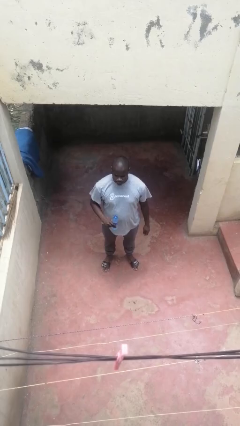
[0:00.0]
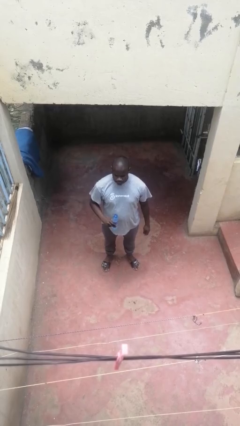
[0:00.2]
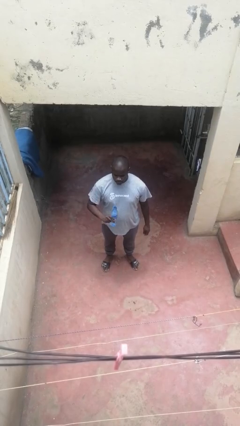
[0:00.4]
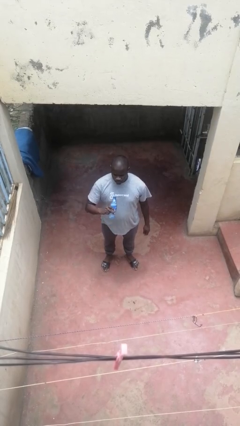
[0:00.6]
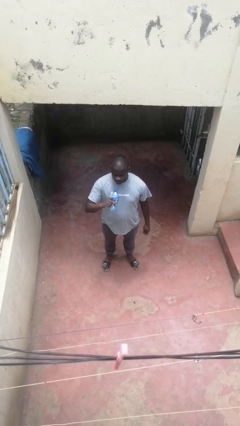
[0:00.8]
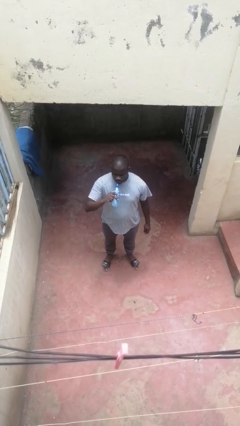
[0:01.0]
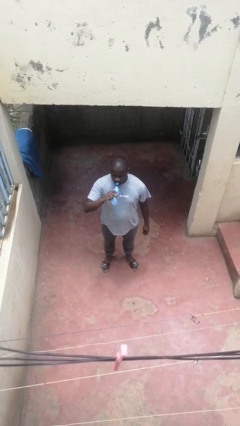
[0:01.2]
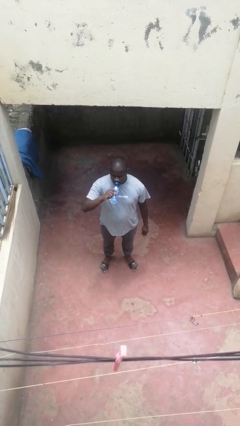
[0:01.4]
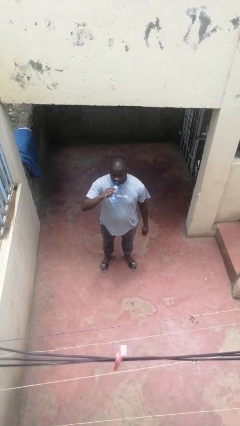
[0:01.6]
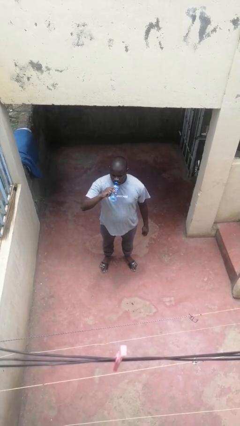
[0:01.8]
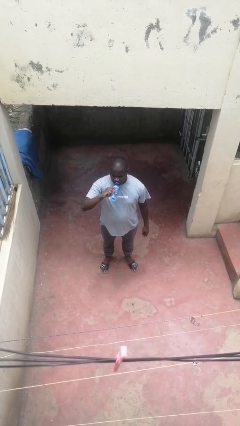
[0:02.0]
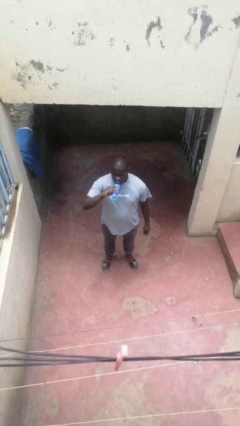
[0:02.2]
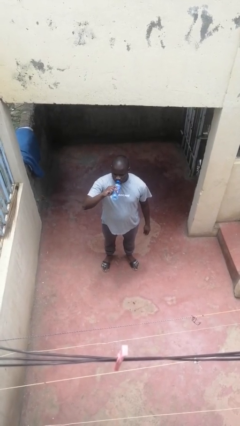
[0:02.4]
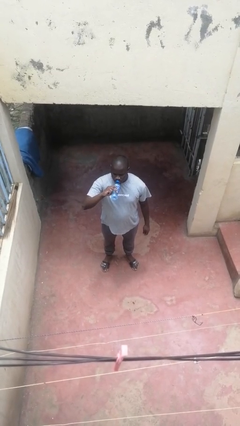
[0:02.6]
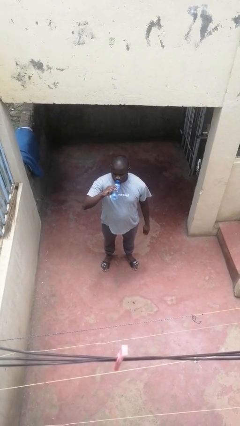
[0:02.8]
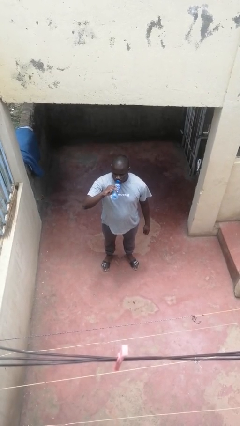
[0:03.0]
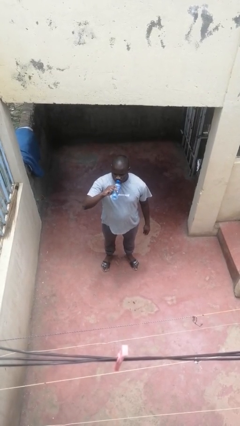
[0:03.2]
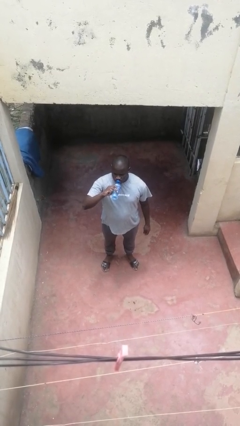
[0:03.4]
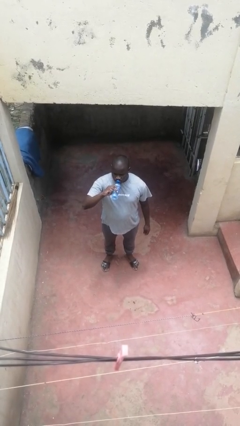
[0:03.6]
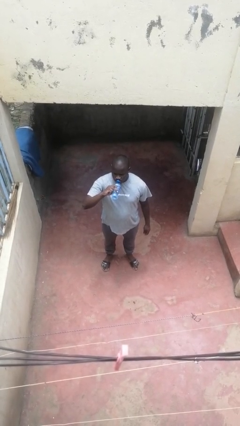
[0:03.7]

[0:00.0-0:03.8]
person drinks from bottle

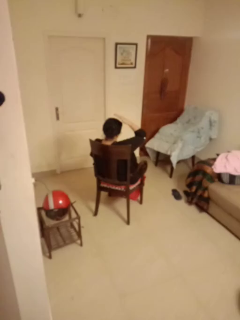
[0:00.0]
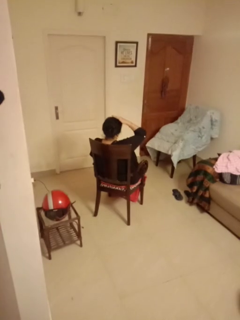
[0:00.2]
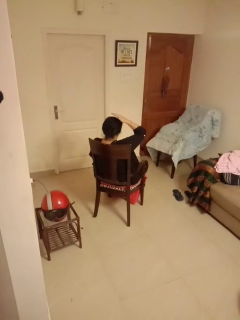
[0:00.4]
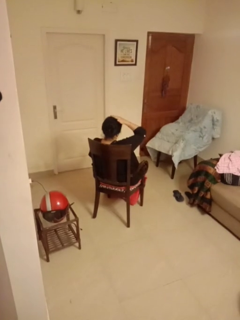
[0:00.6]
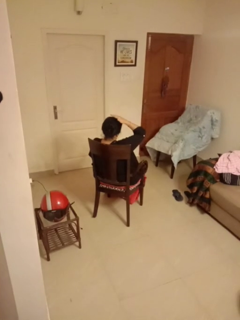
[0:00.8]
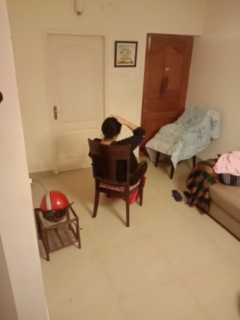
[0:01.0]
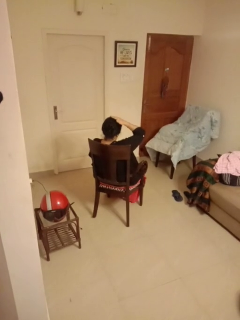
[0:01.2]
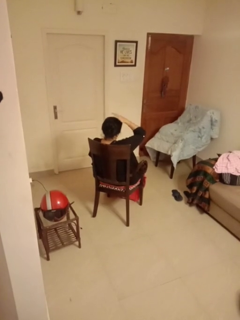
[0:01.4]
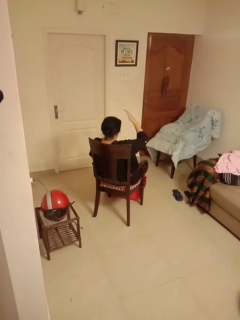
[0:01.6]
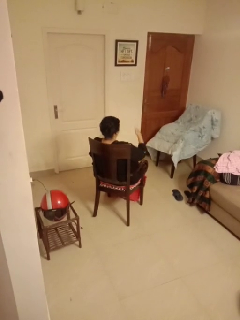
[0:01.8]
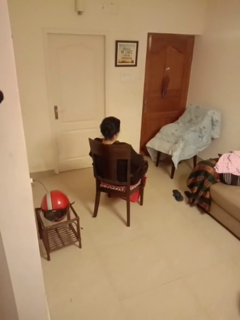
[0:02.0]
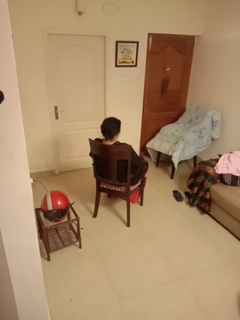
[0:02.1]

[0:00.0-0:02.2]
person pats head

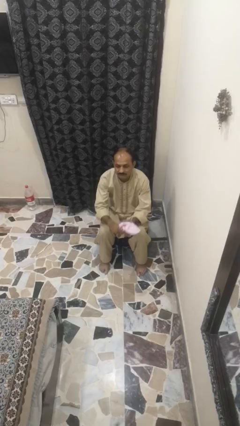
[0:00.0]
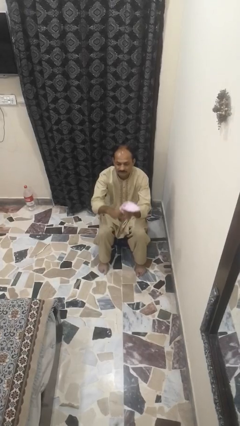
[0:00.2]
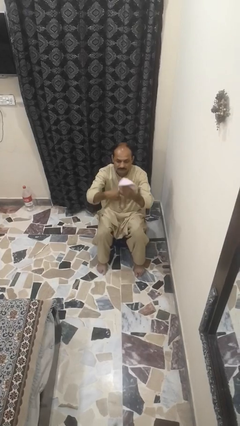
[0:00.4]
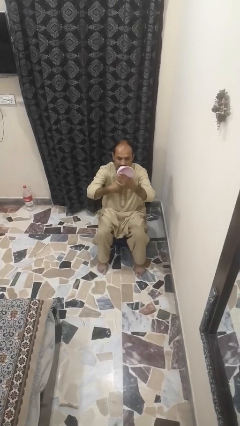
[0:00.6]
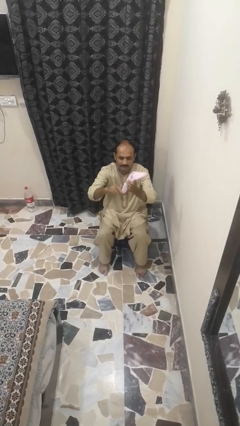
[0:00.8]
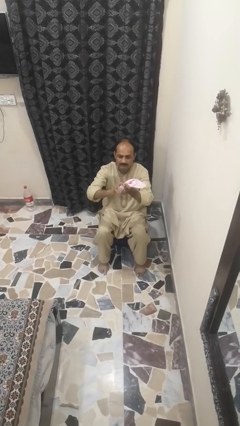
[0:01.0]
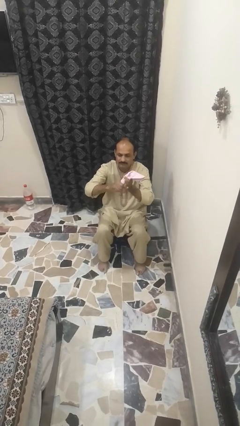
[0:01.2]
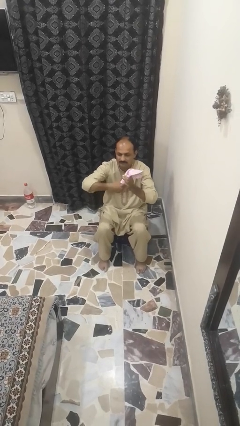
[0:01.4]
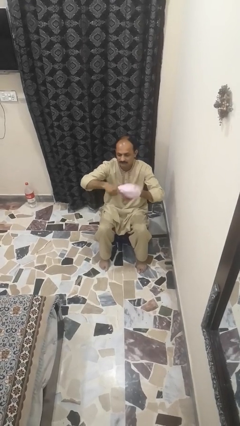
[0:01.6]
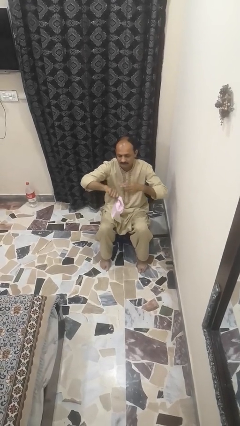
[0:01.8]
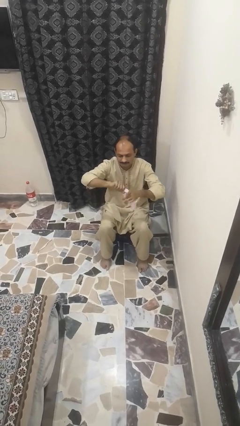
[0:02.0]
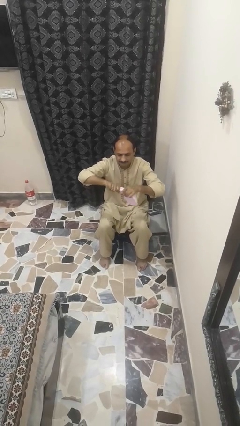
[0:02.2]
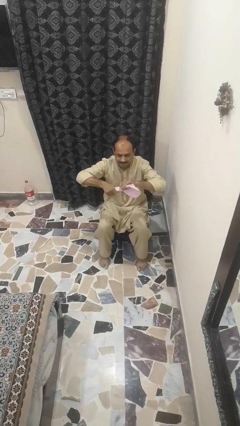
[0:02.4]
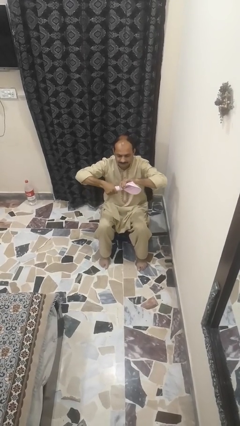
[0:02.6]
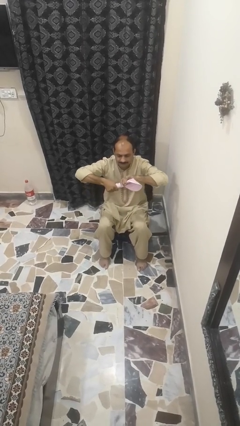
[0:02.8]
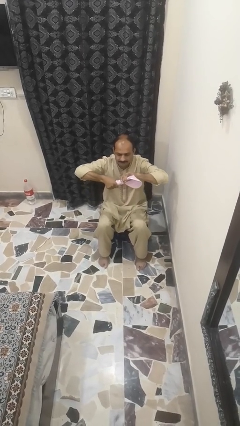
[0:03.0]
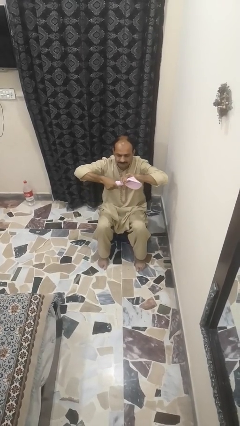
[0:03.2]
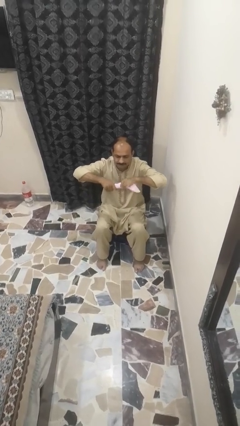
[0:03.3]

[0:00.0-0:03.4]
person squeezes object

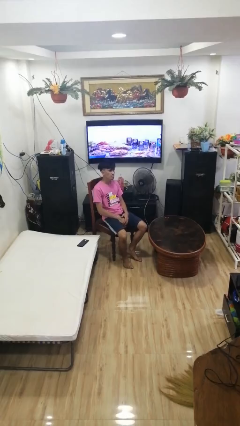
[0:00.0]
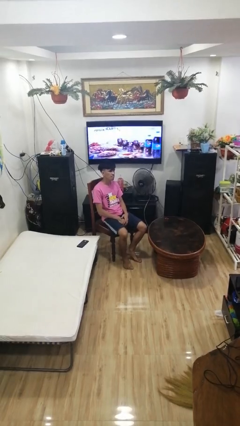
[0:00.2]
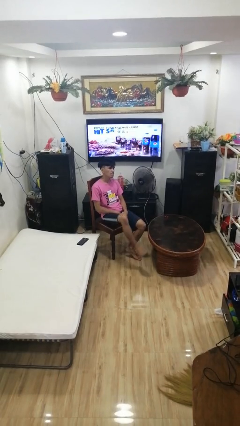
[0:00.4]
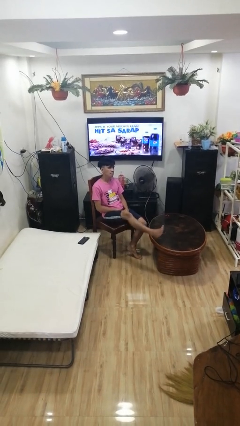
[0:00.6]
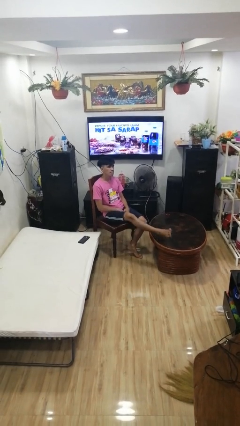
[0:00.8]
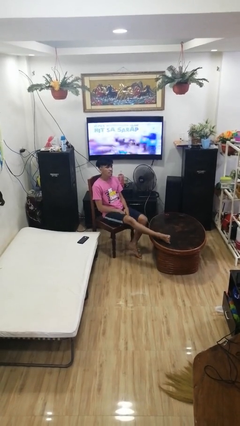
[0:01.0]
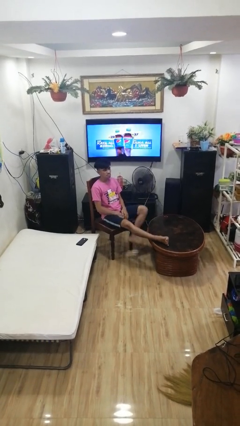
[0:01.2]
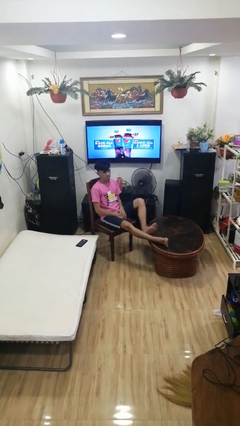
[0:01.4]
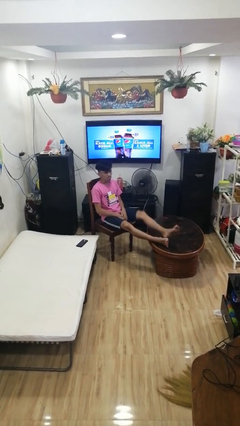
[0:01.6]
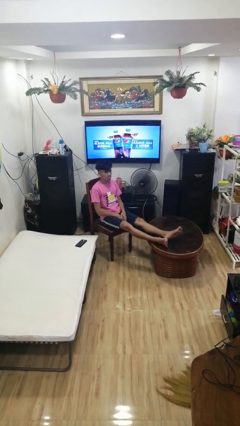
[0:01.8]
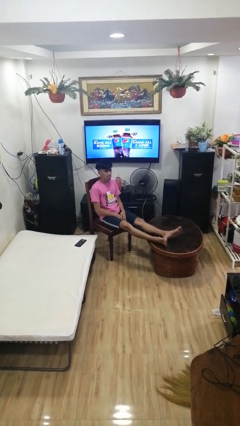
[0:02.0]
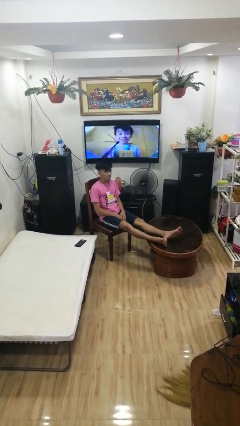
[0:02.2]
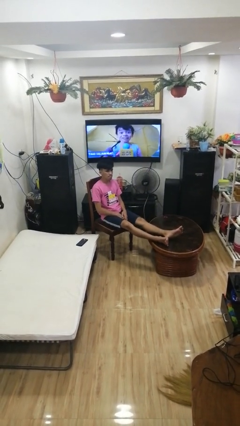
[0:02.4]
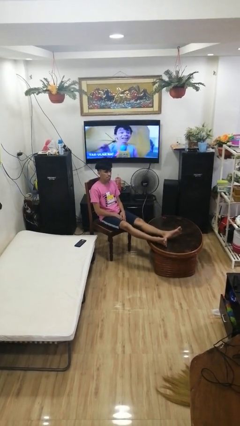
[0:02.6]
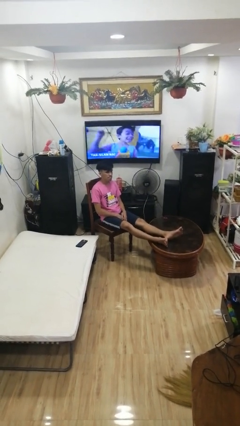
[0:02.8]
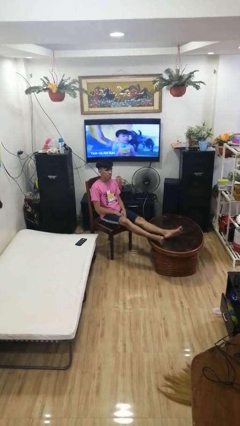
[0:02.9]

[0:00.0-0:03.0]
person puts feet up

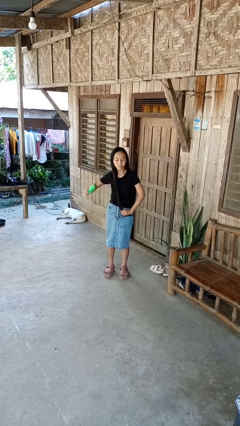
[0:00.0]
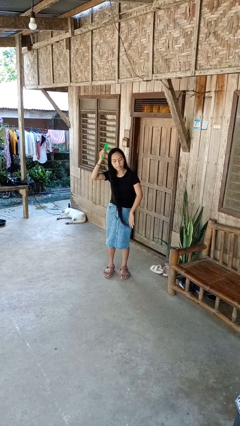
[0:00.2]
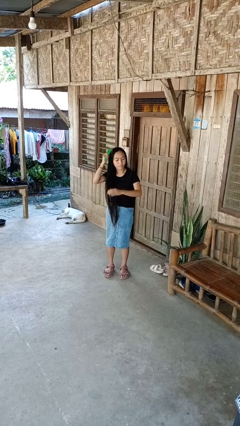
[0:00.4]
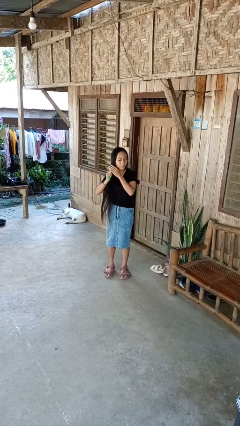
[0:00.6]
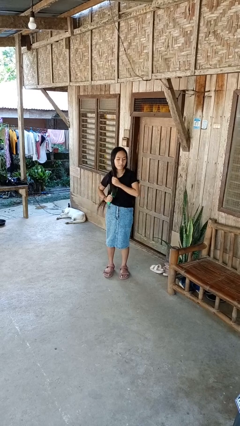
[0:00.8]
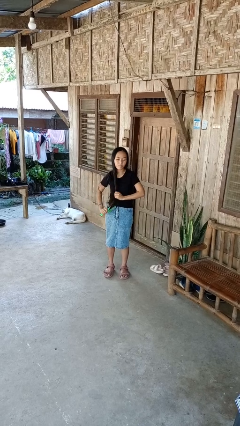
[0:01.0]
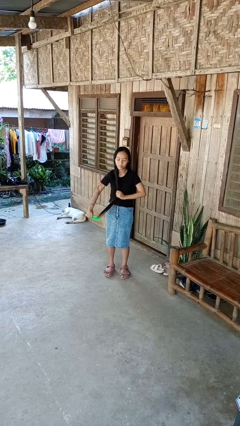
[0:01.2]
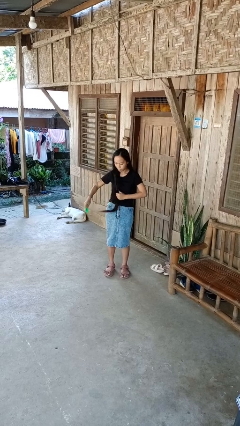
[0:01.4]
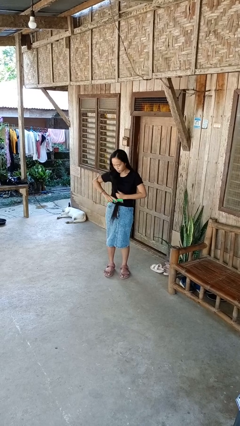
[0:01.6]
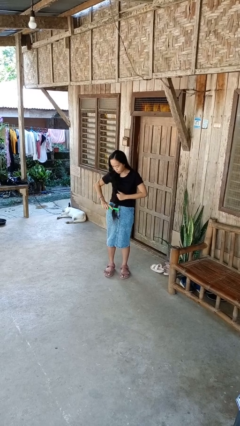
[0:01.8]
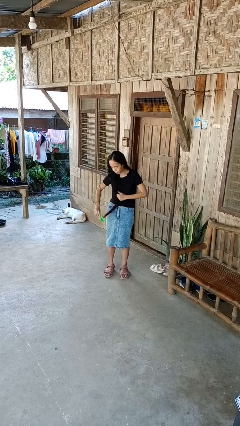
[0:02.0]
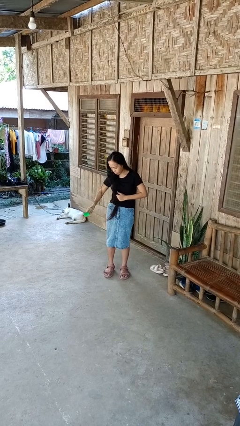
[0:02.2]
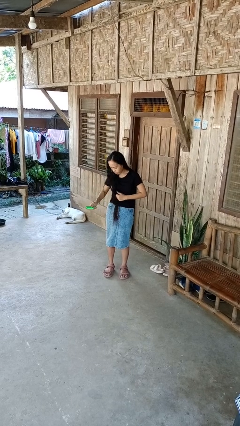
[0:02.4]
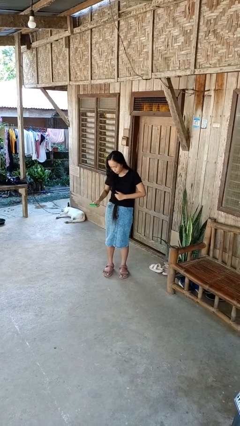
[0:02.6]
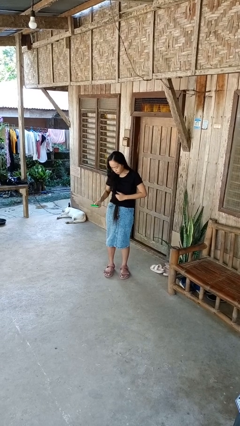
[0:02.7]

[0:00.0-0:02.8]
person brushes hair

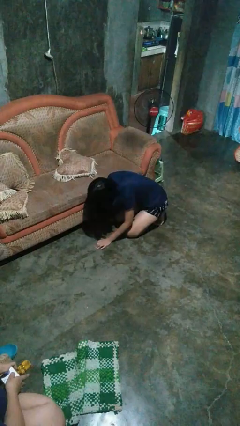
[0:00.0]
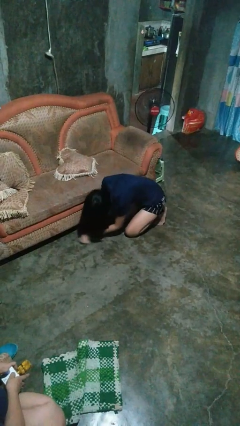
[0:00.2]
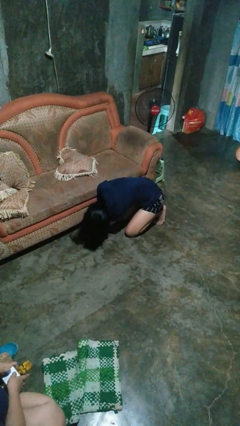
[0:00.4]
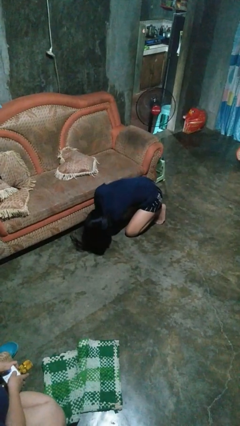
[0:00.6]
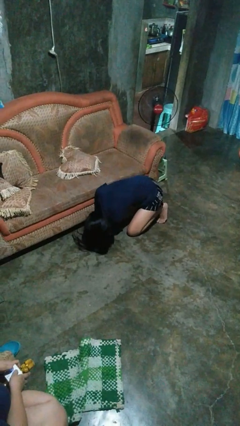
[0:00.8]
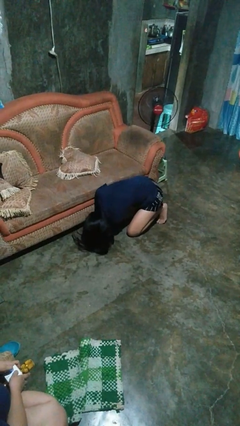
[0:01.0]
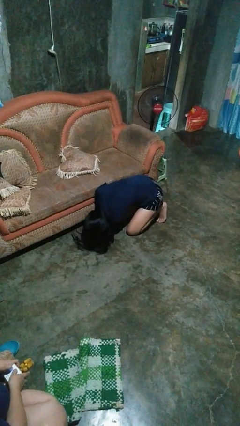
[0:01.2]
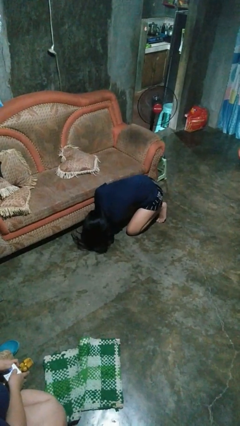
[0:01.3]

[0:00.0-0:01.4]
person searches in couch

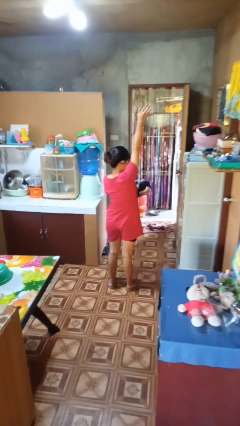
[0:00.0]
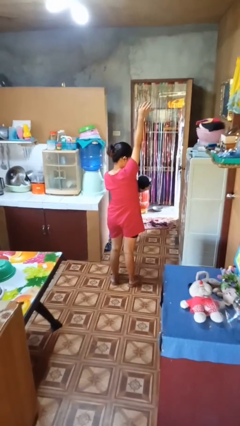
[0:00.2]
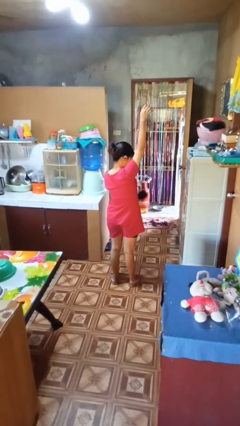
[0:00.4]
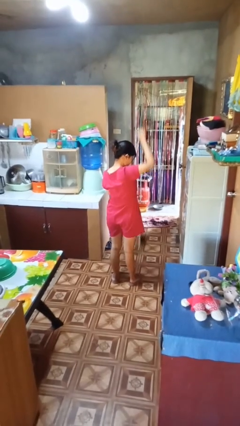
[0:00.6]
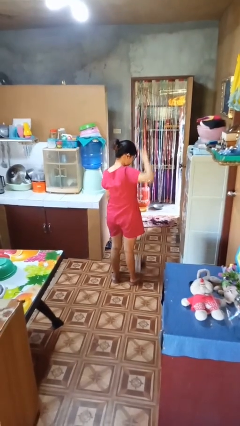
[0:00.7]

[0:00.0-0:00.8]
person catches dropped object
